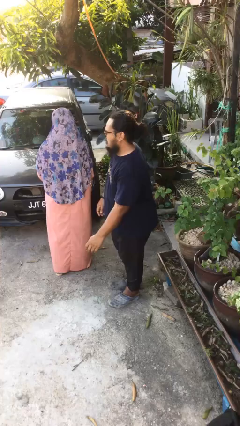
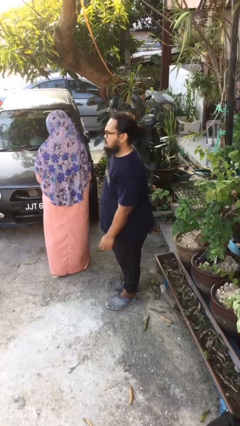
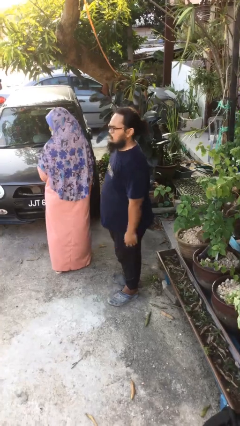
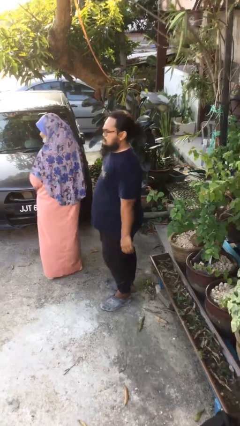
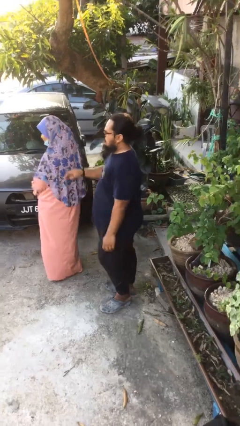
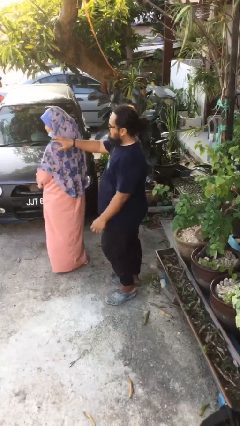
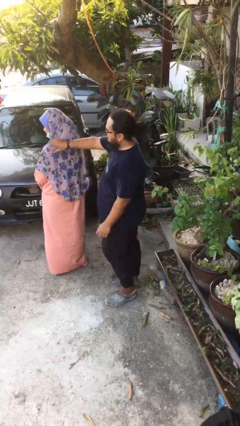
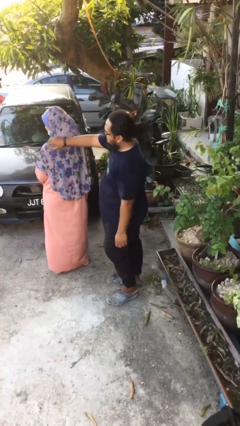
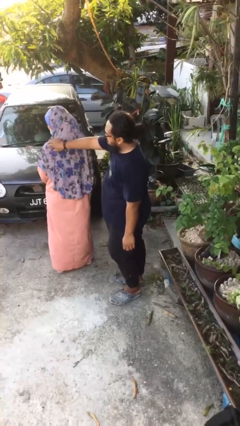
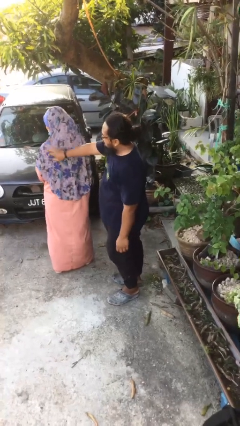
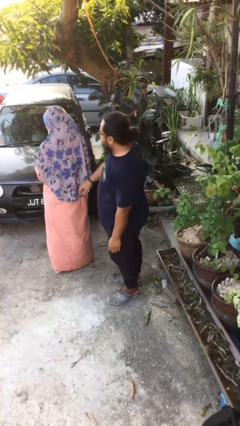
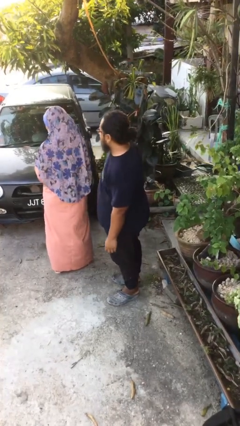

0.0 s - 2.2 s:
person touches back of person

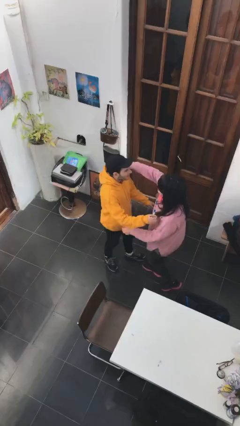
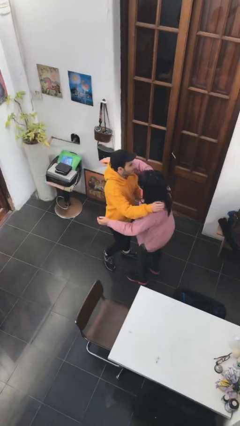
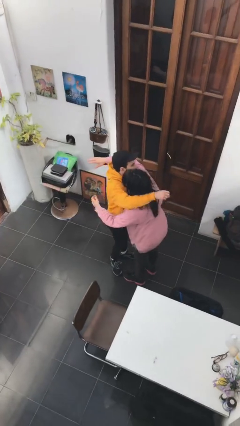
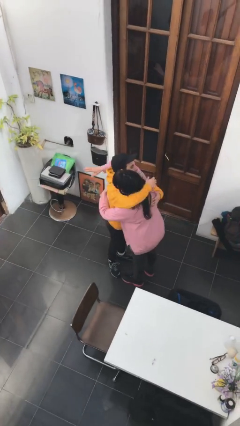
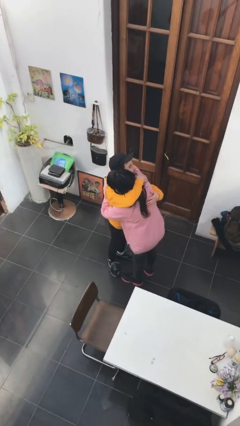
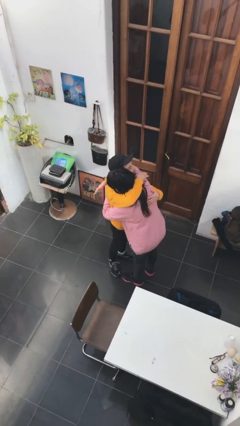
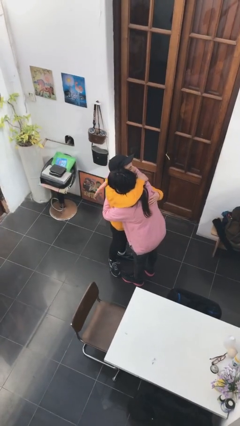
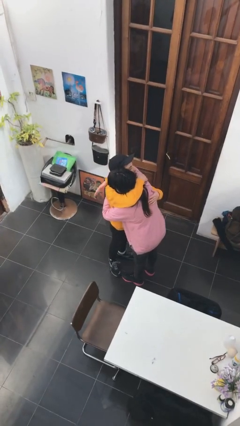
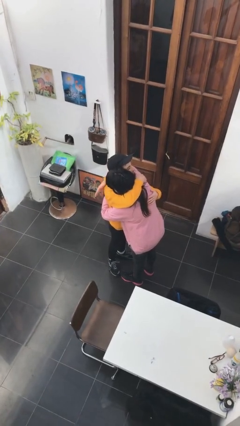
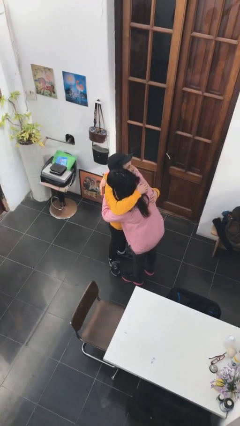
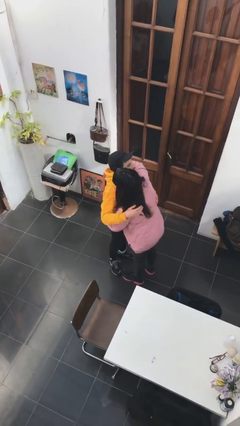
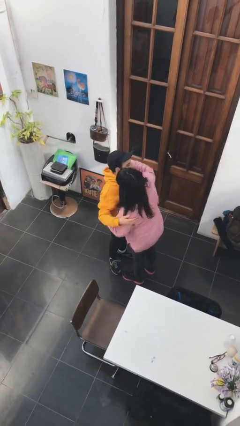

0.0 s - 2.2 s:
person embraces person

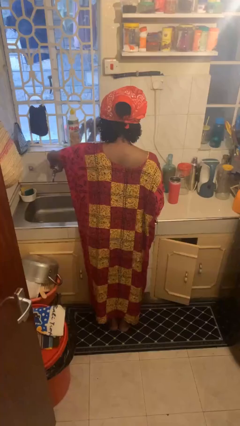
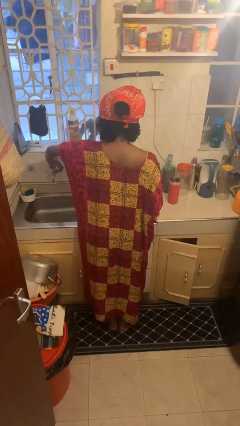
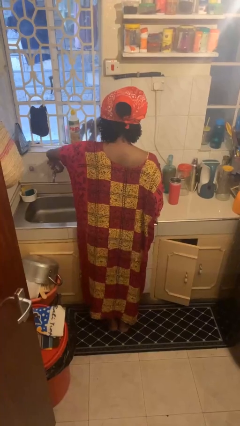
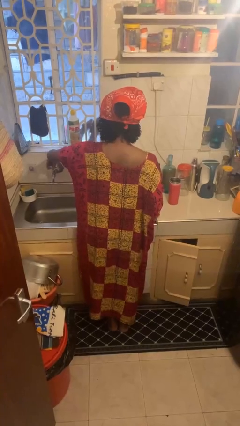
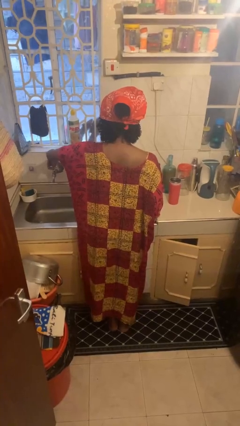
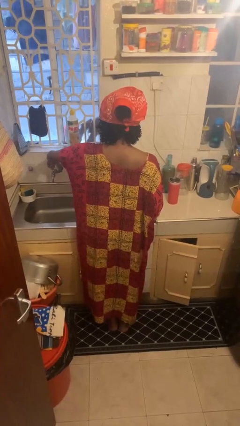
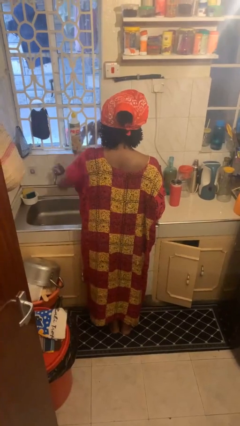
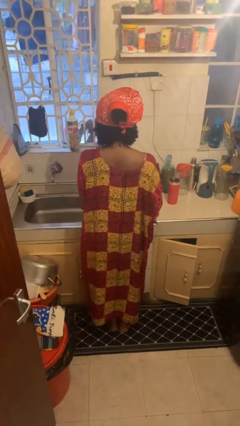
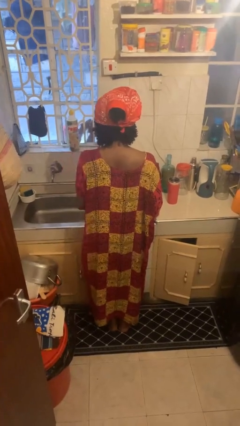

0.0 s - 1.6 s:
person turns off faucet

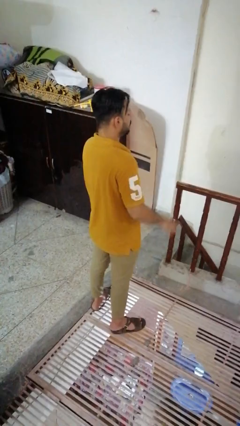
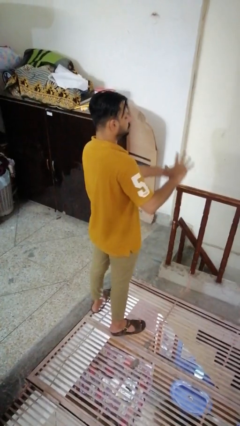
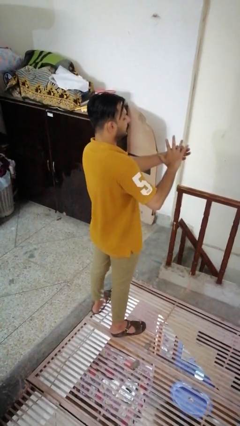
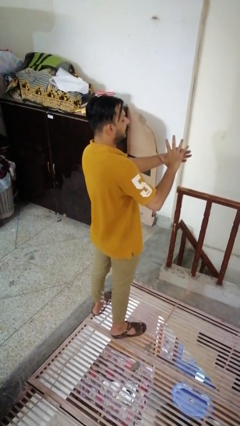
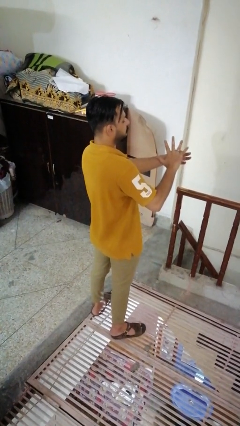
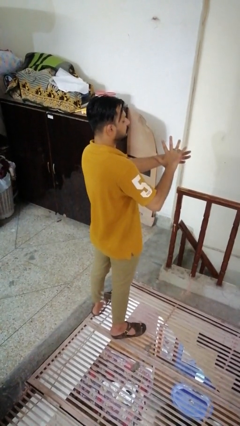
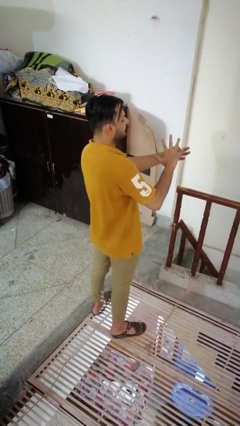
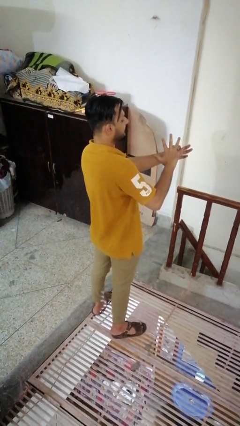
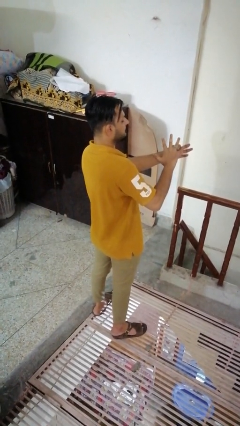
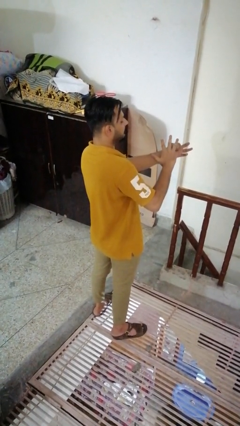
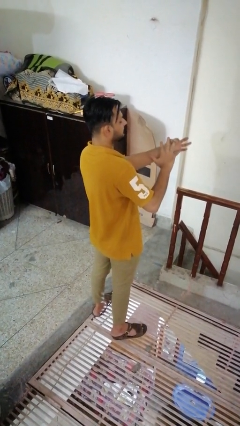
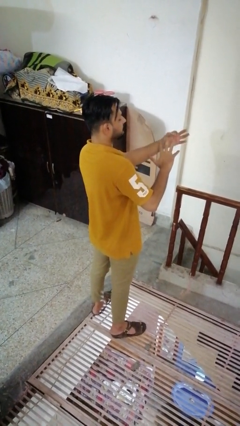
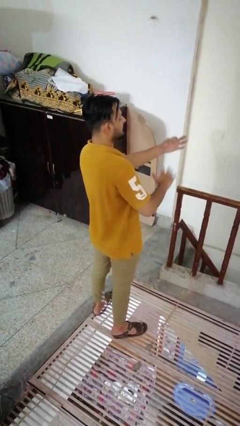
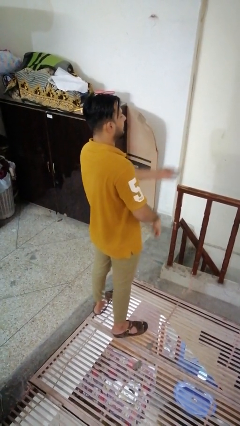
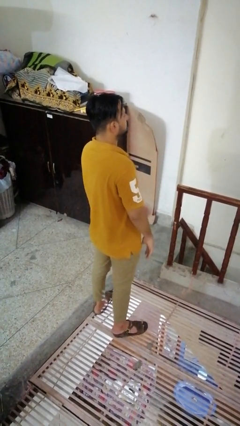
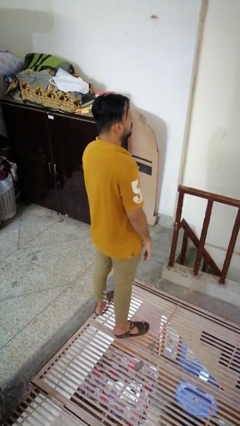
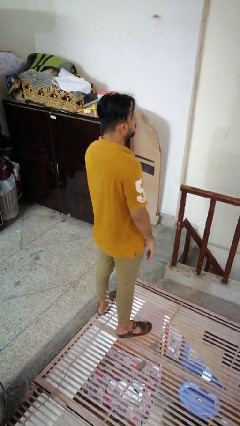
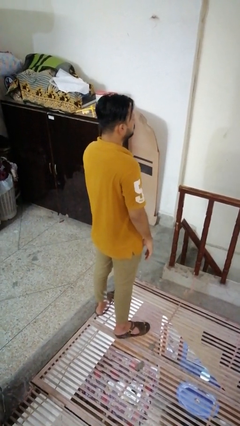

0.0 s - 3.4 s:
person takes off ring

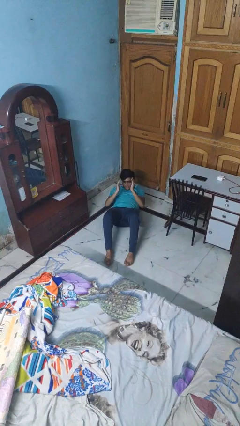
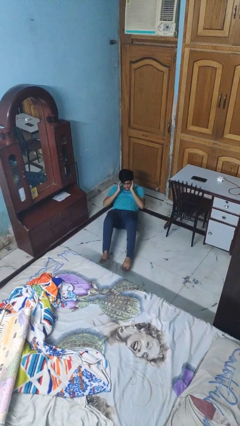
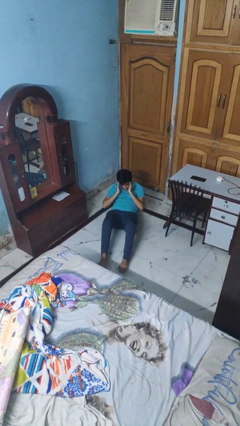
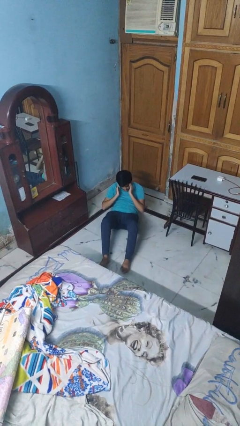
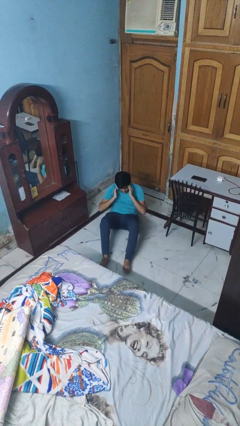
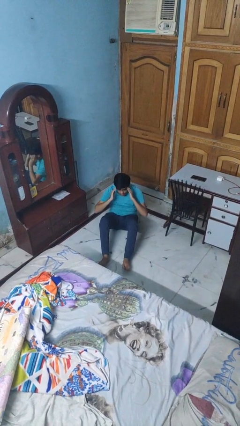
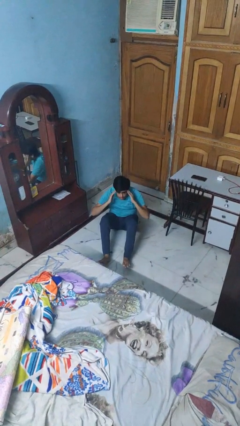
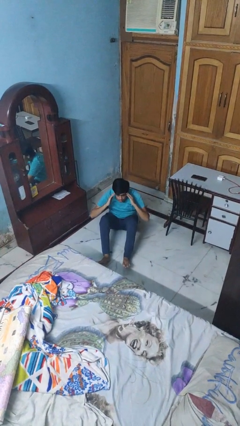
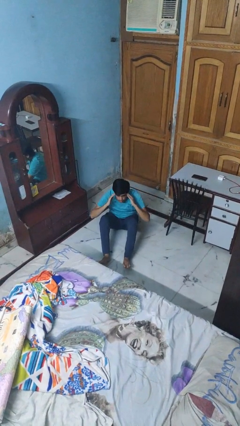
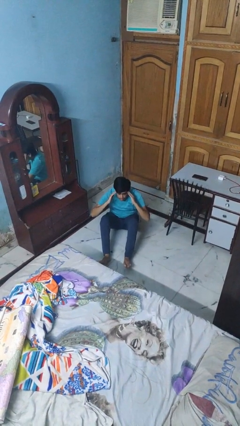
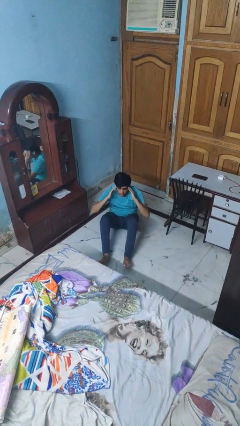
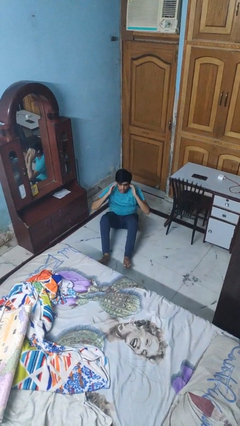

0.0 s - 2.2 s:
person exercises with situp

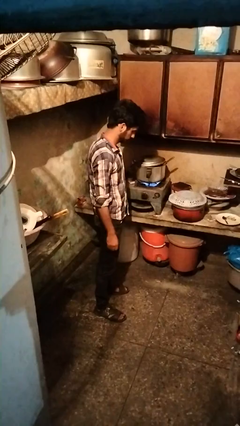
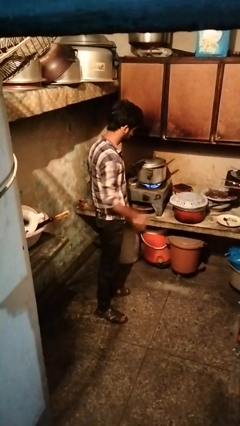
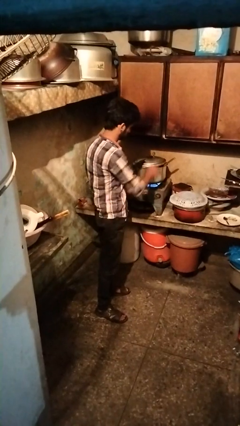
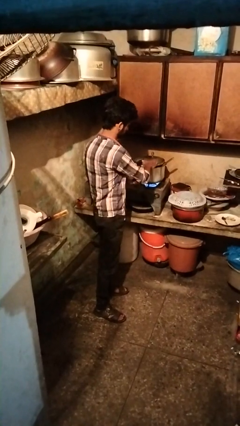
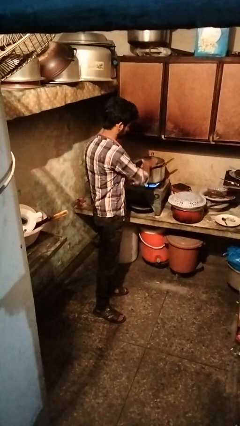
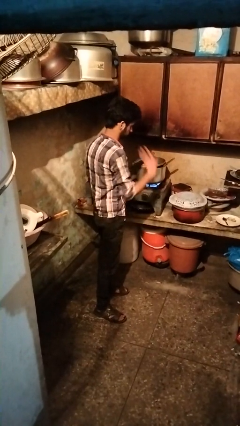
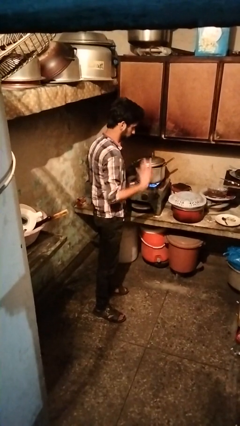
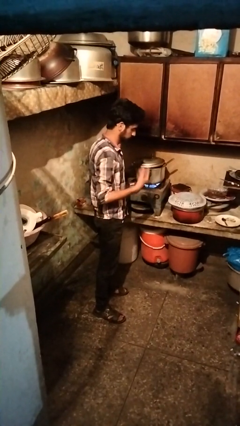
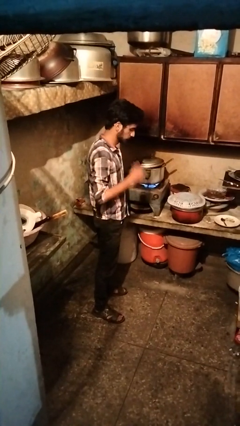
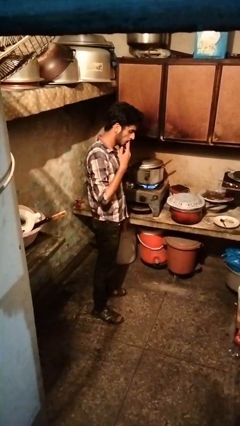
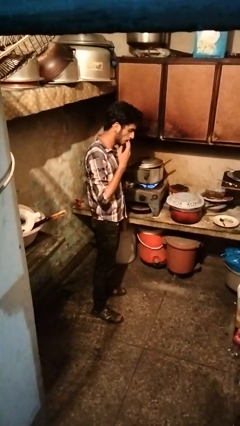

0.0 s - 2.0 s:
person burns hand

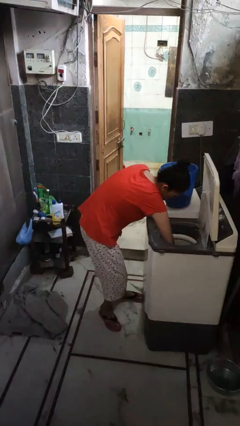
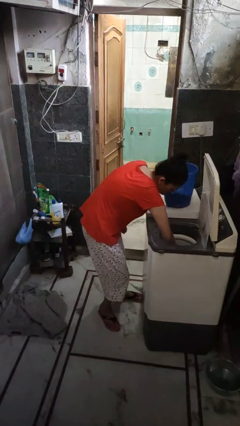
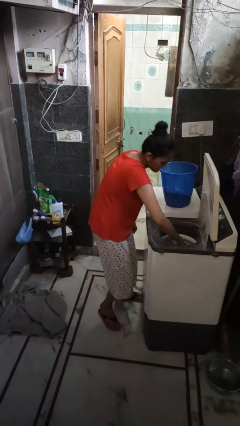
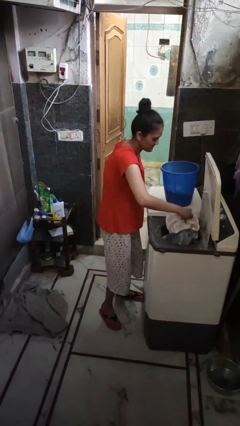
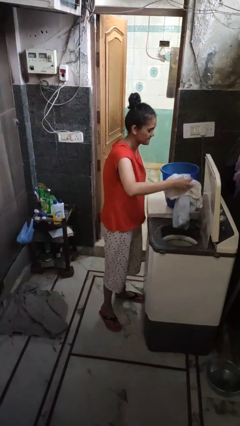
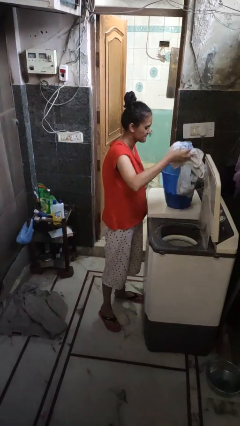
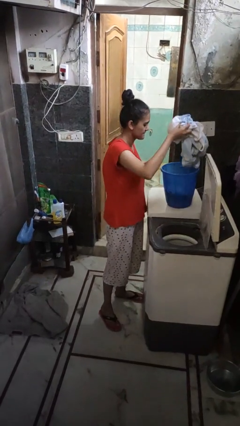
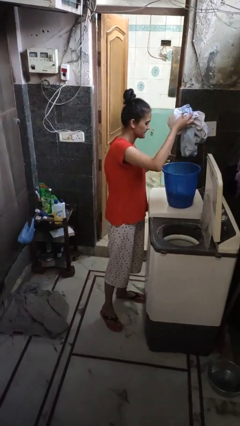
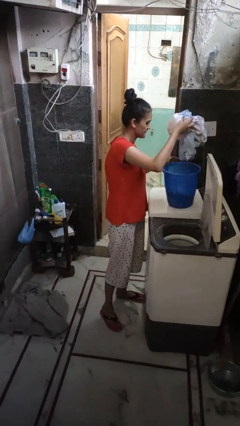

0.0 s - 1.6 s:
person unloads clotheswasher

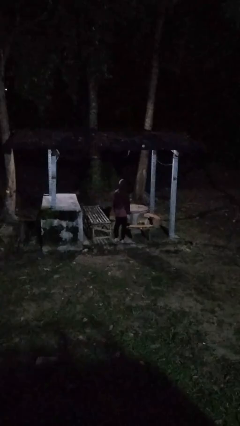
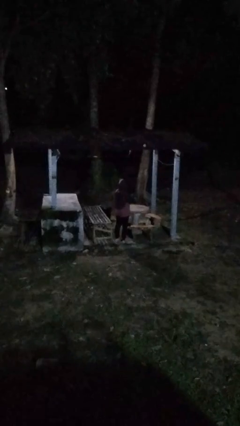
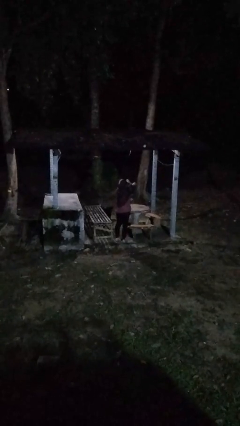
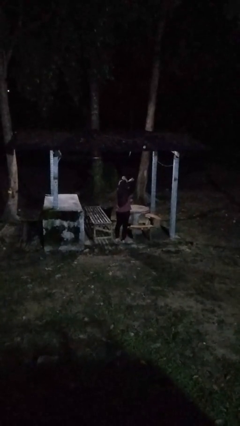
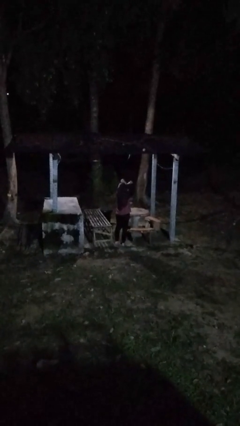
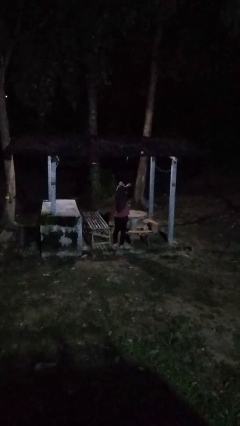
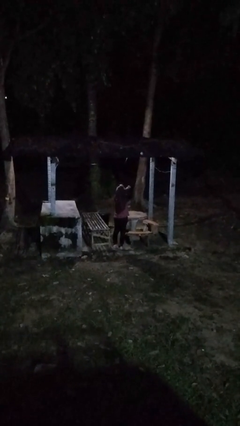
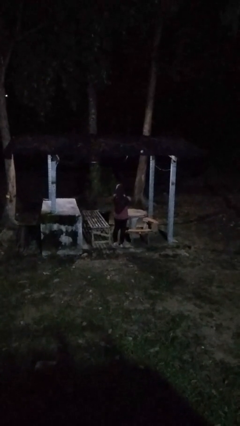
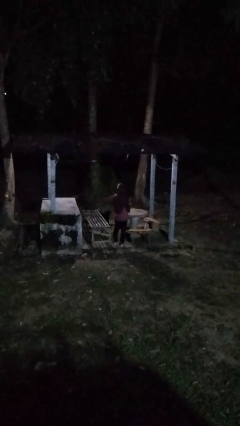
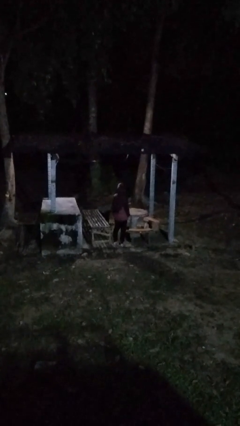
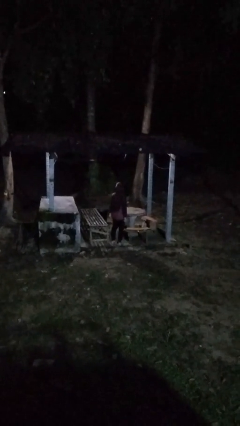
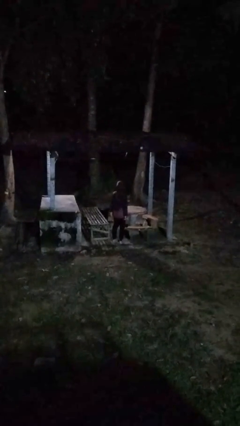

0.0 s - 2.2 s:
person gestures arms x
